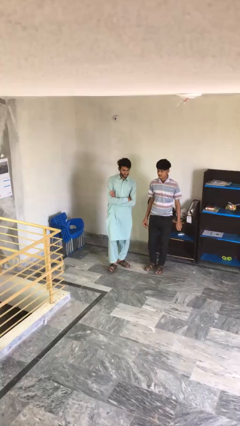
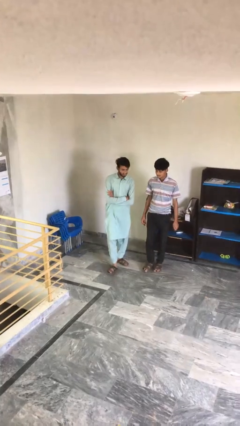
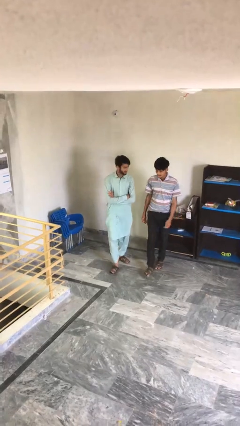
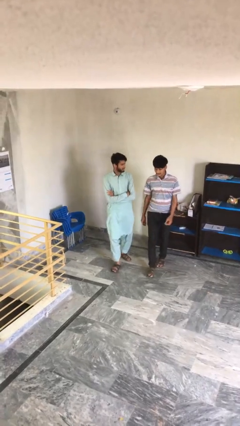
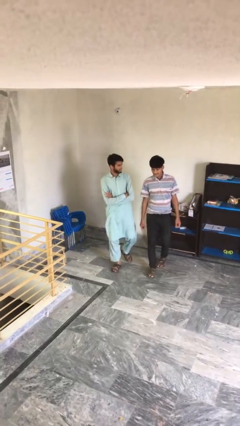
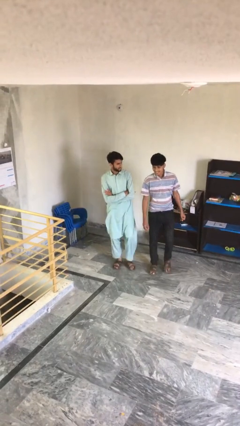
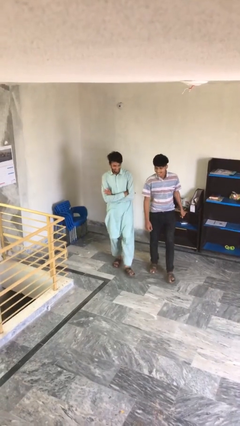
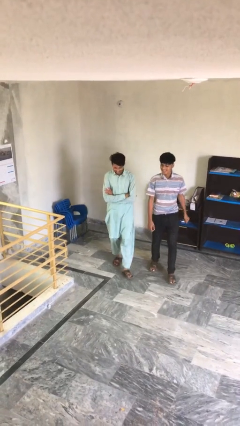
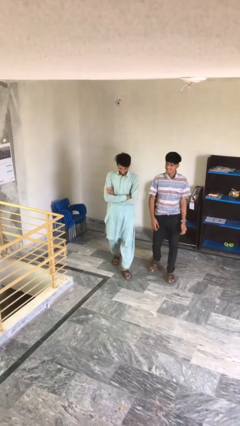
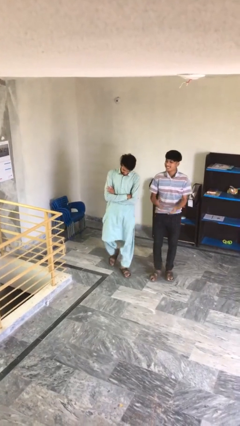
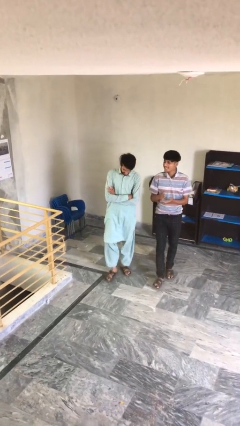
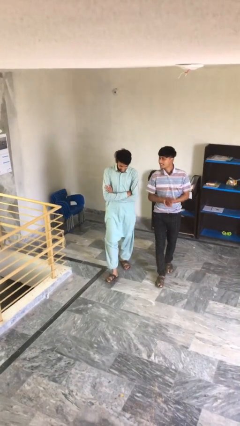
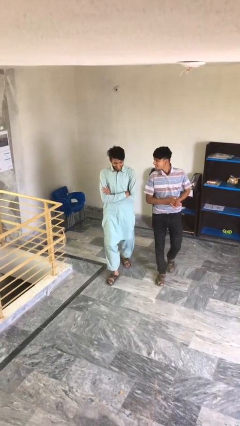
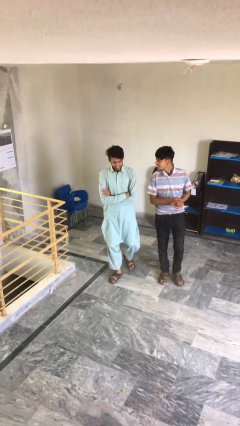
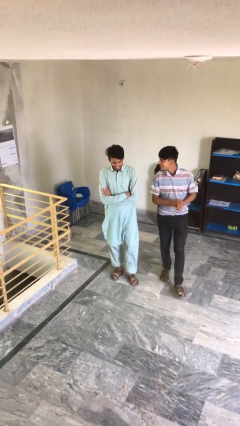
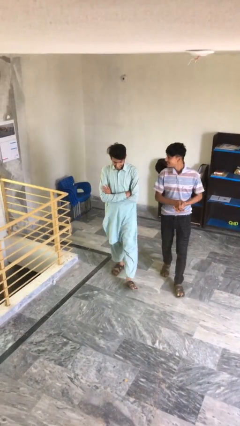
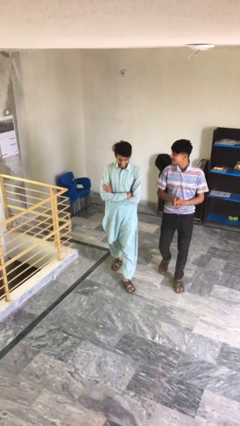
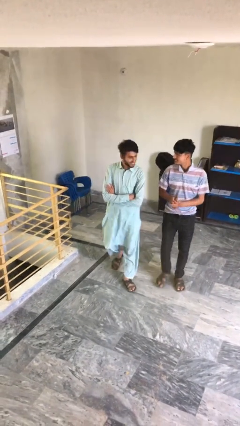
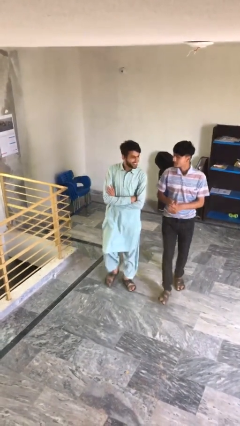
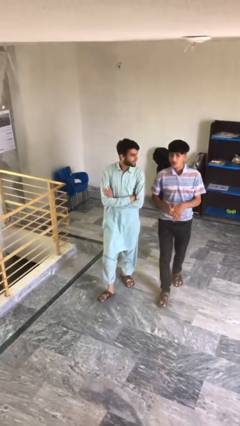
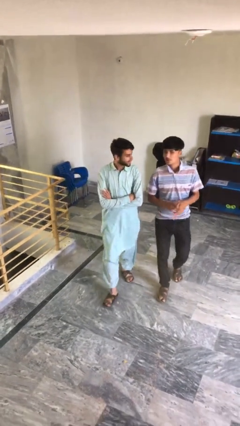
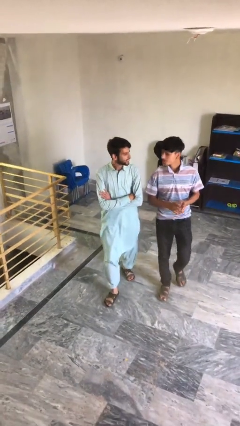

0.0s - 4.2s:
person talks to person

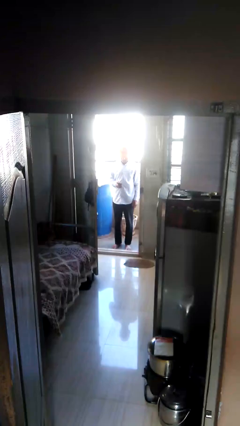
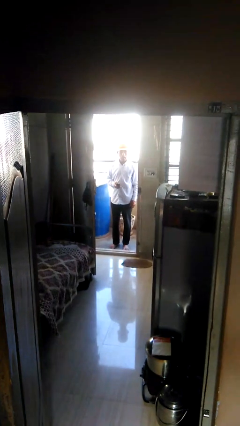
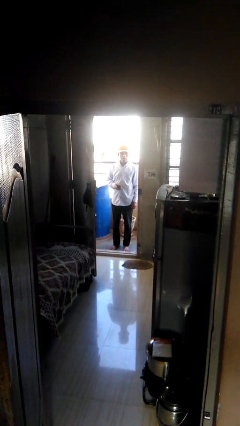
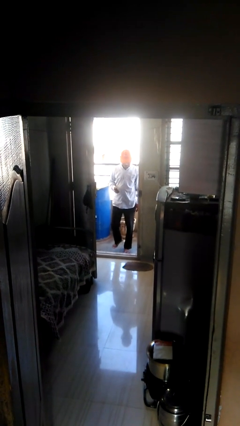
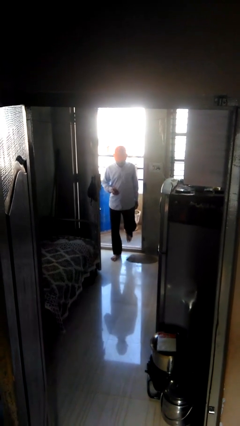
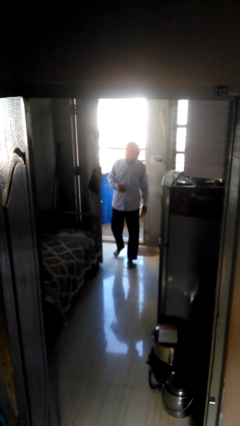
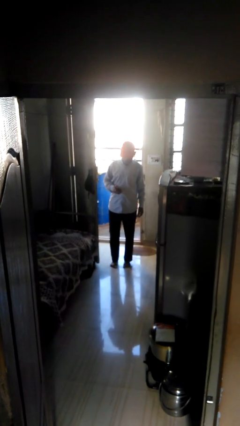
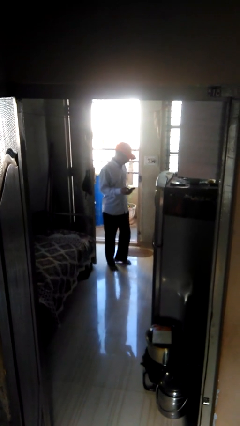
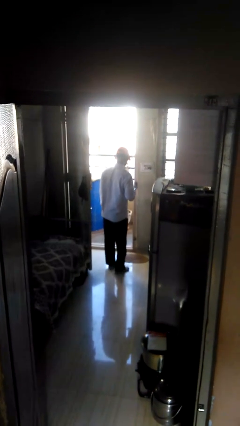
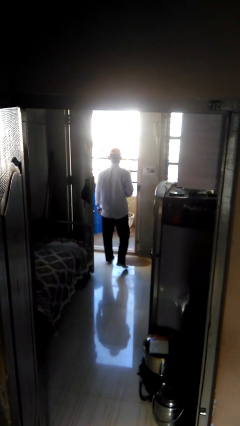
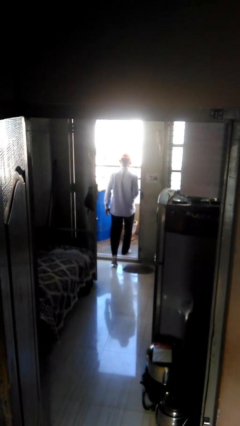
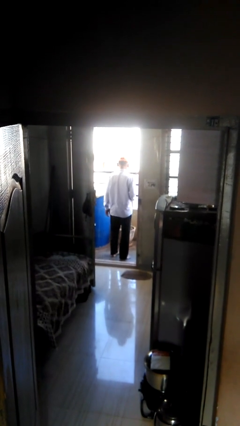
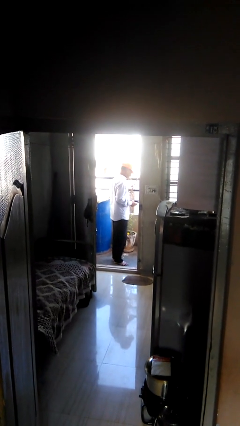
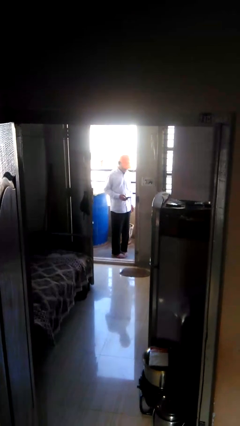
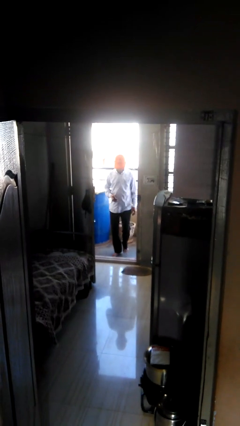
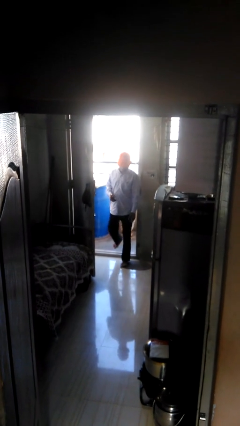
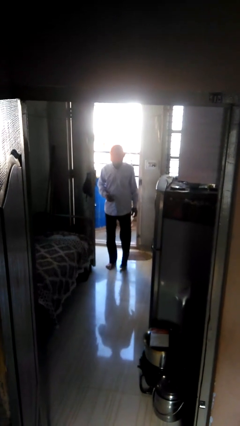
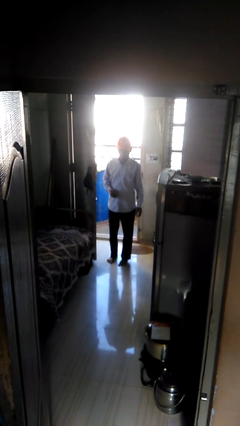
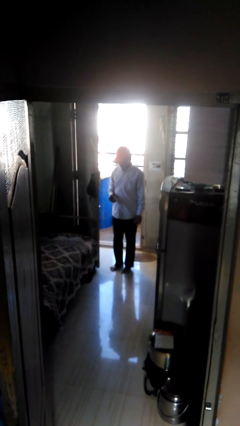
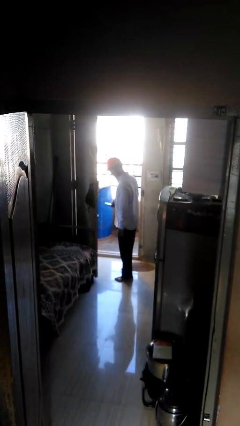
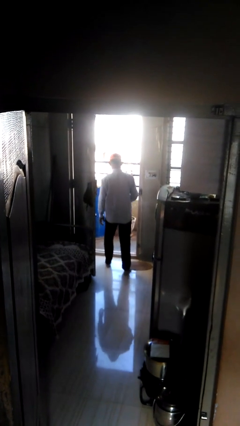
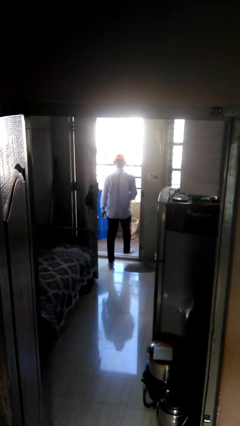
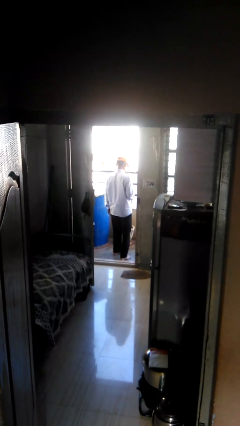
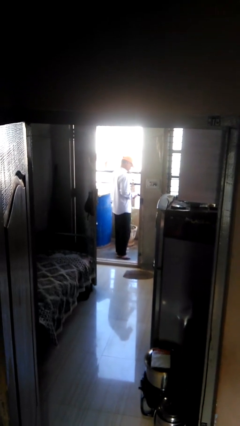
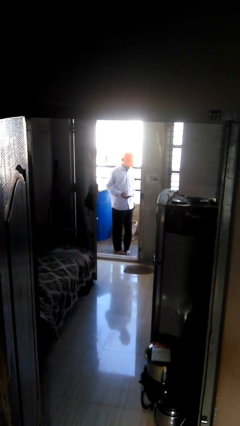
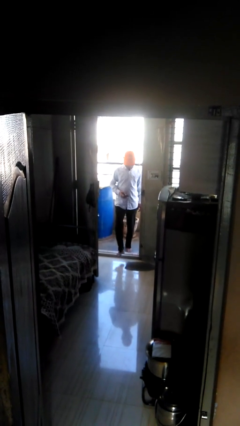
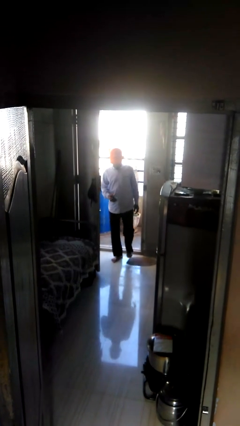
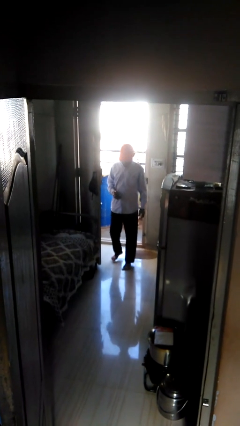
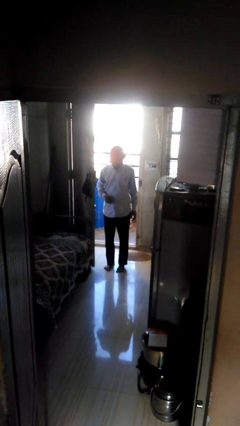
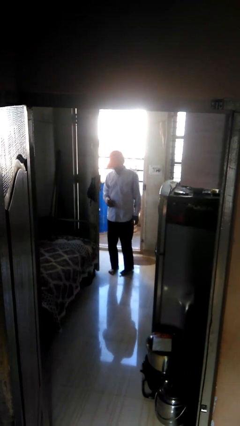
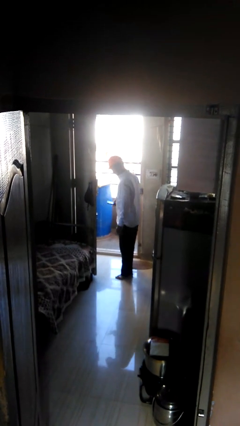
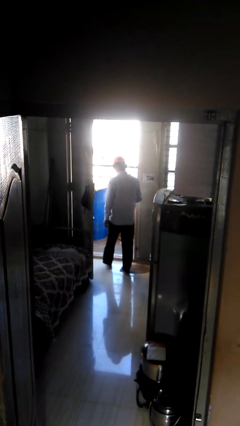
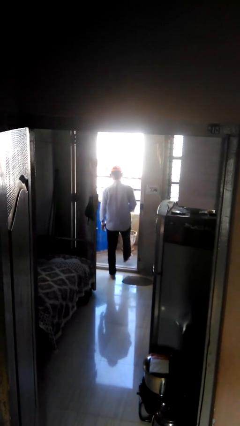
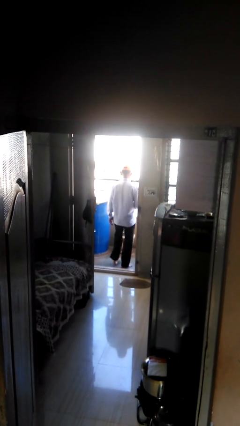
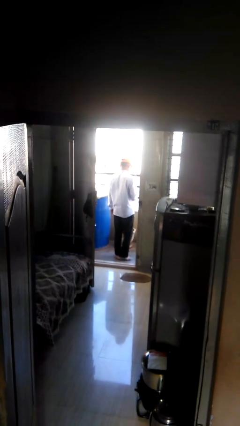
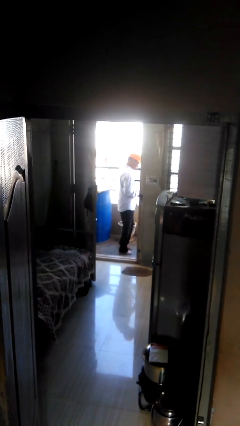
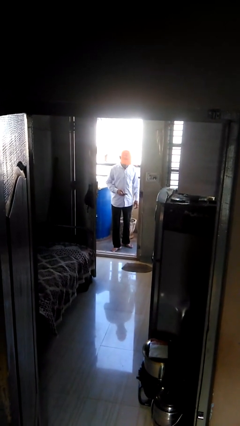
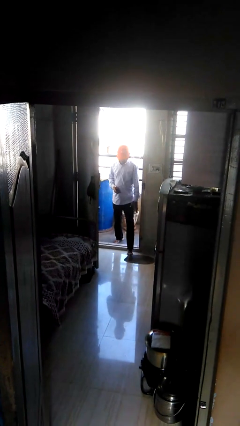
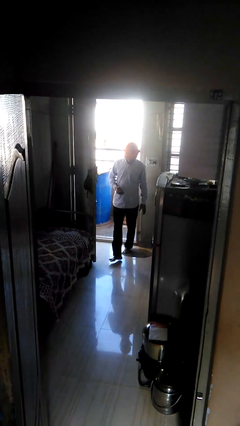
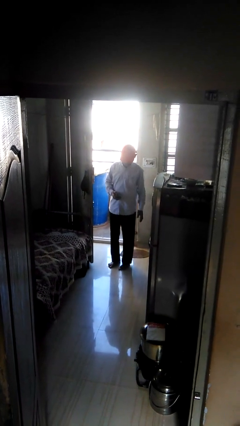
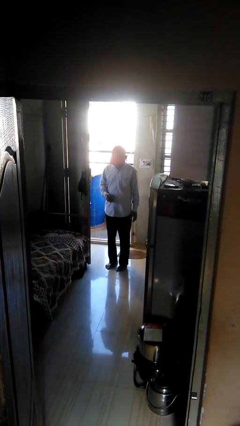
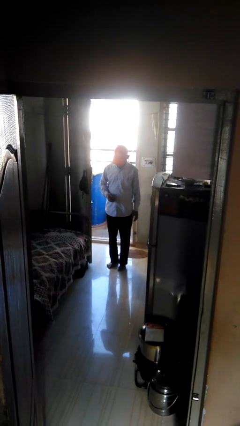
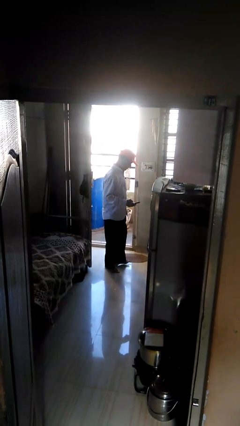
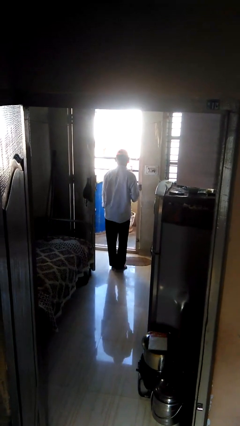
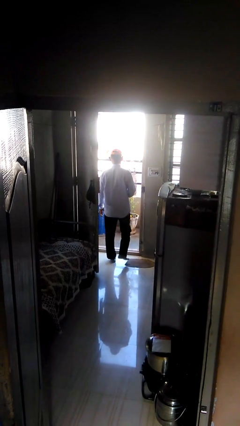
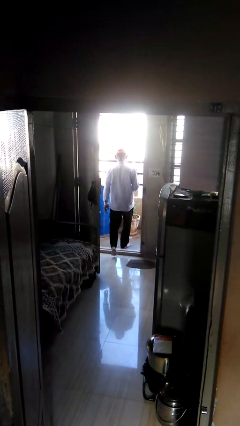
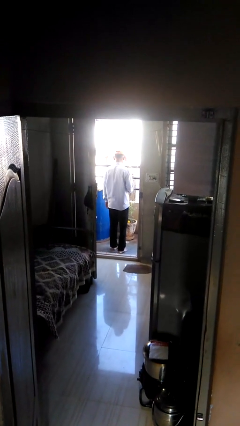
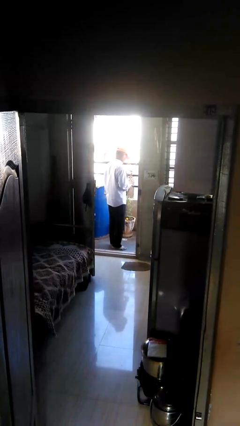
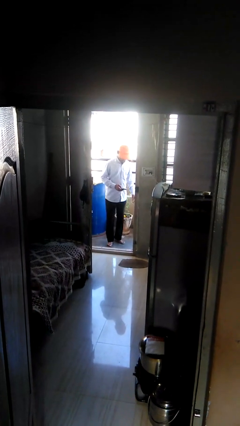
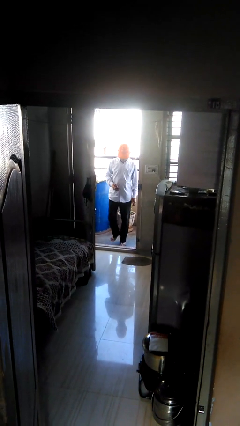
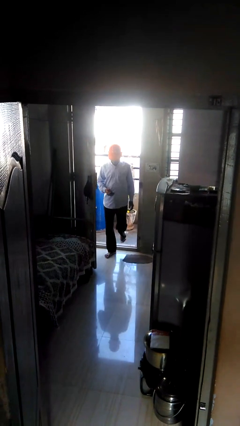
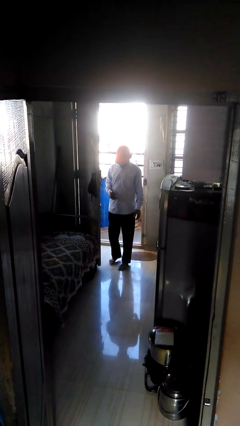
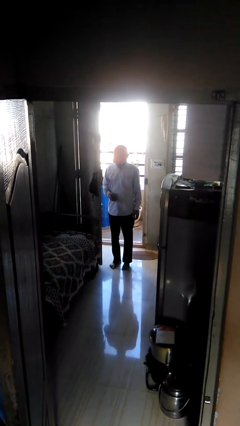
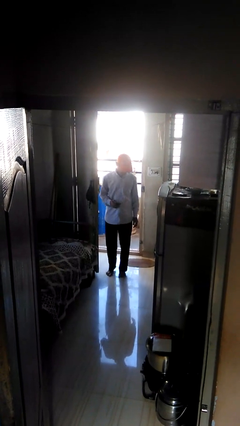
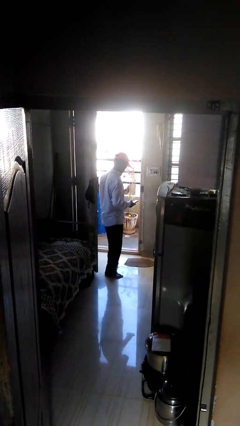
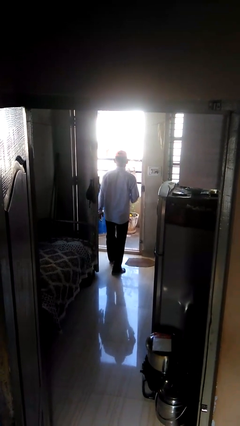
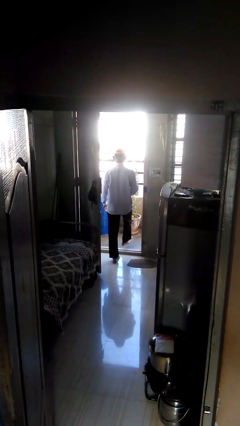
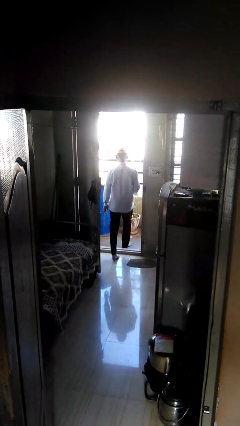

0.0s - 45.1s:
person texts on phone

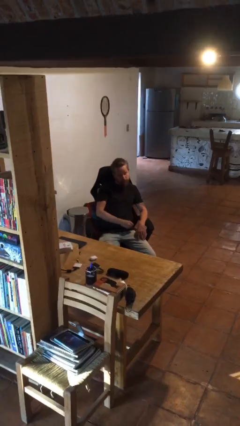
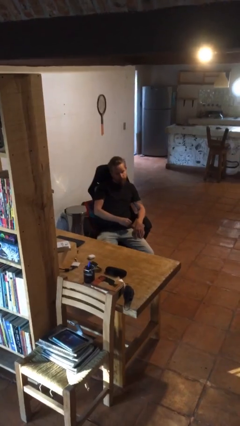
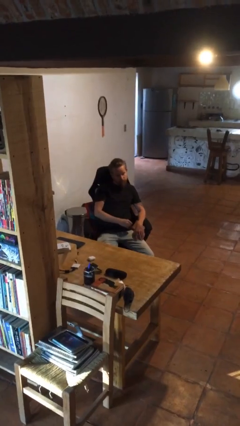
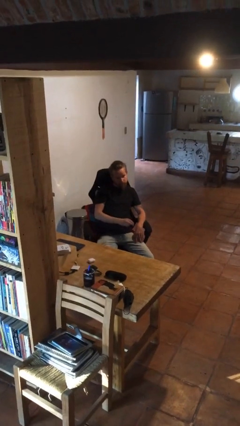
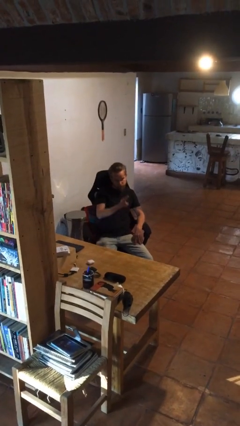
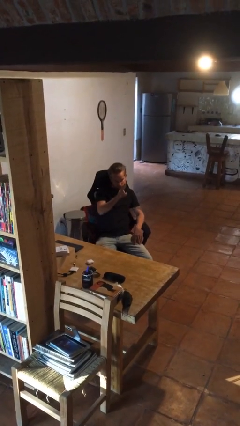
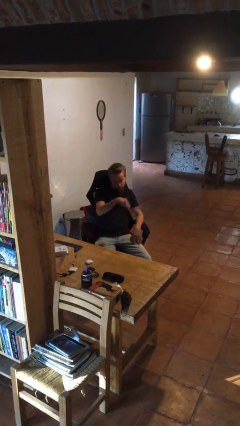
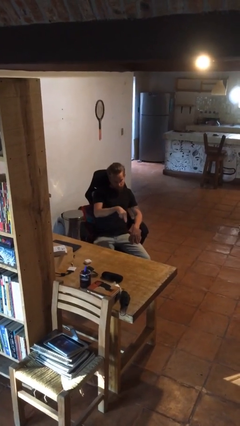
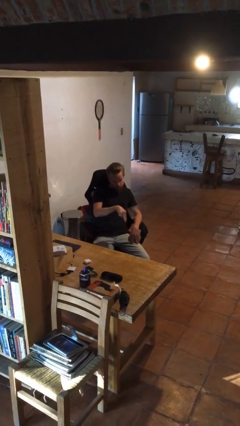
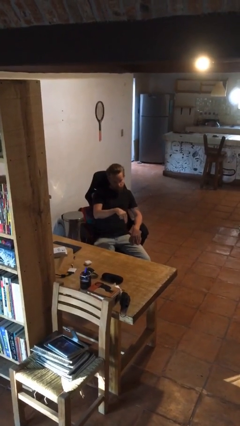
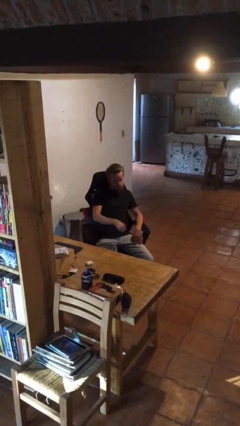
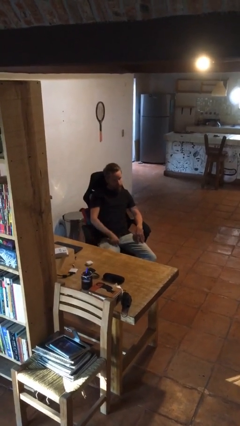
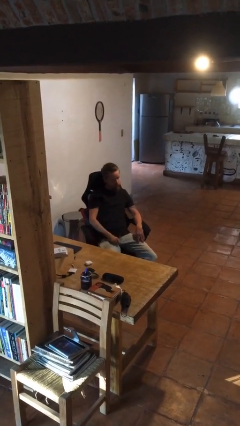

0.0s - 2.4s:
person gestures swipe down
